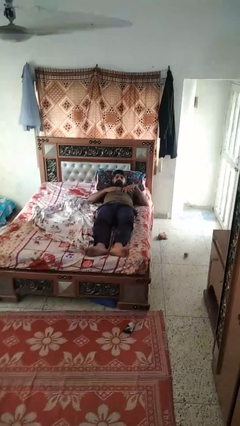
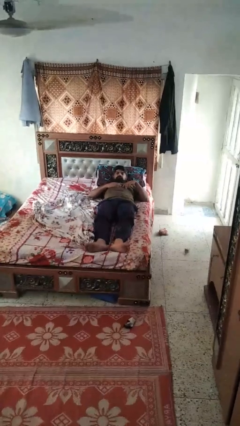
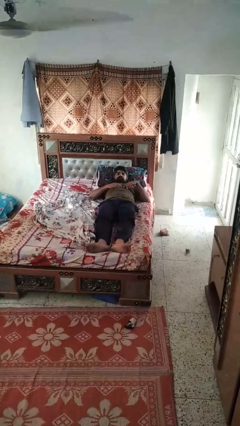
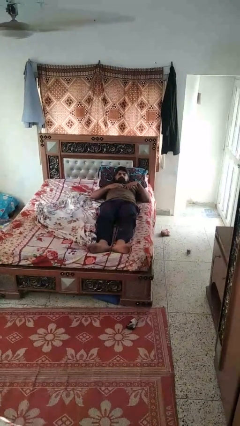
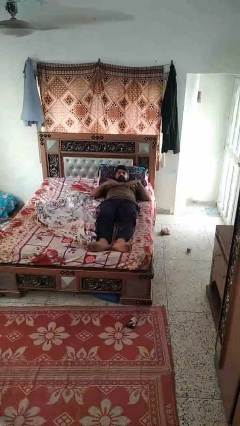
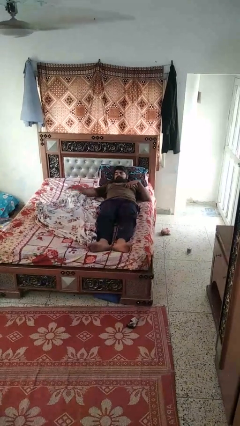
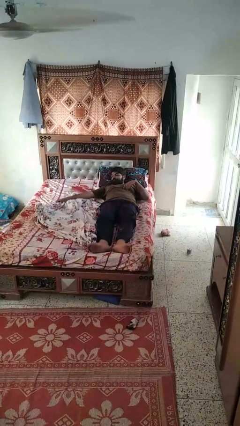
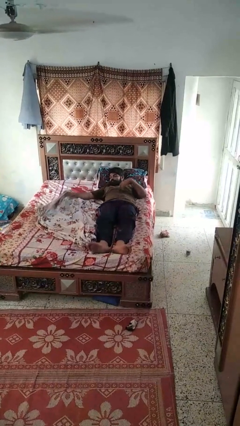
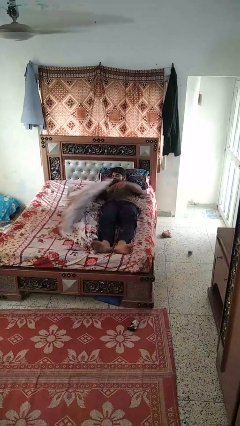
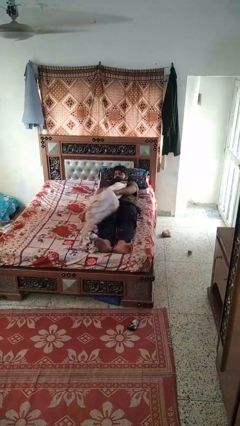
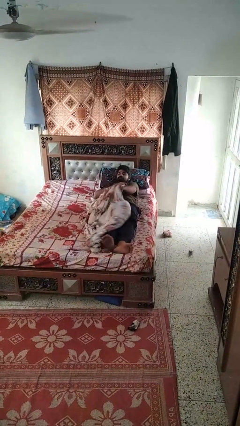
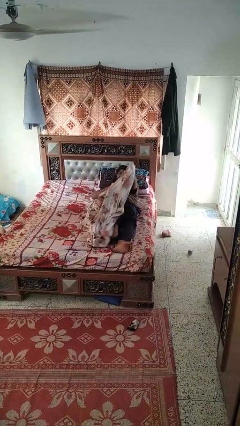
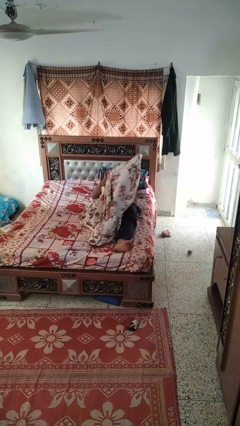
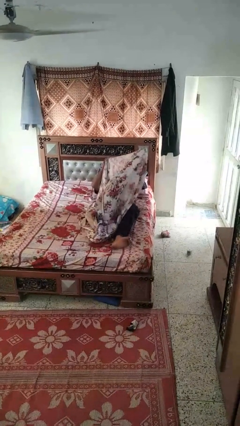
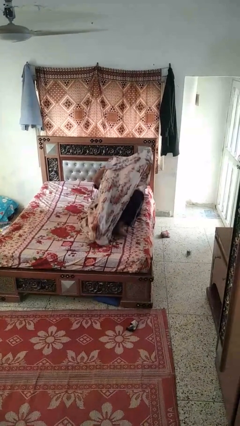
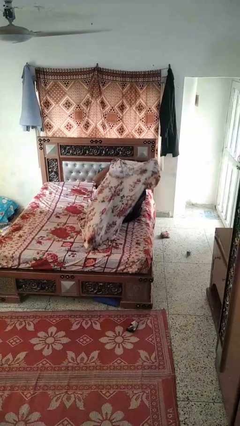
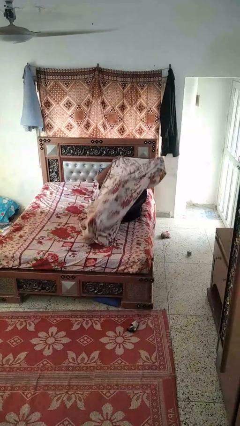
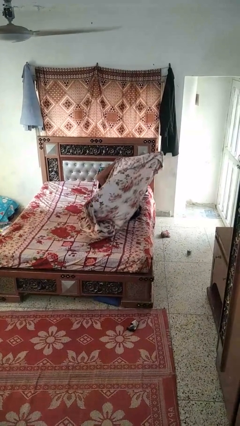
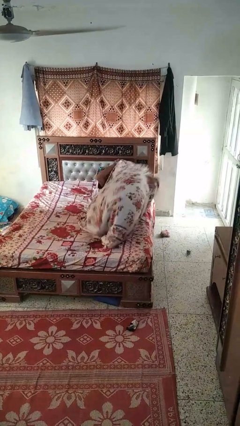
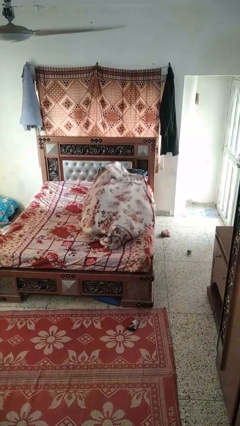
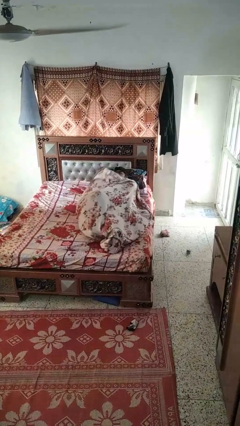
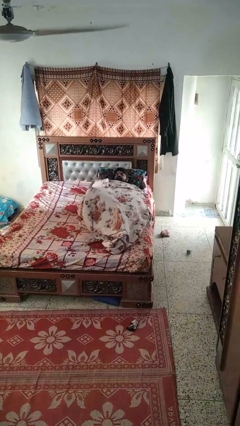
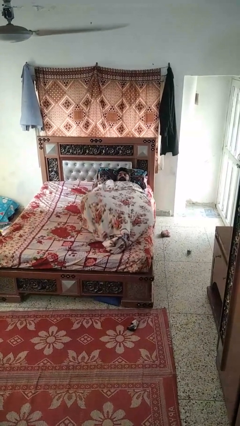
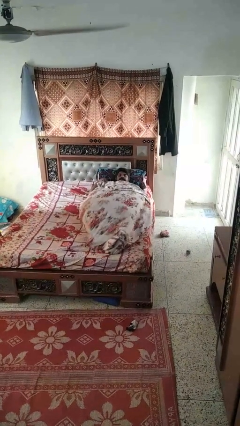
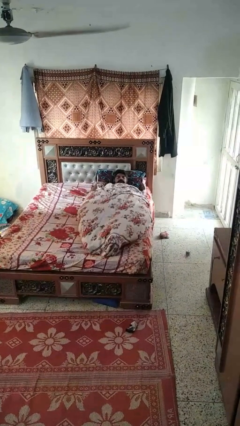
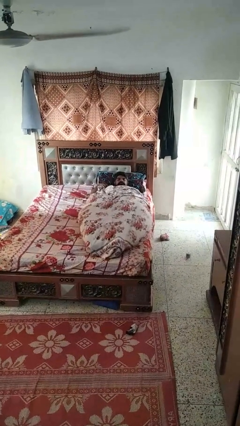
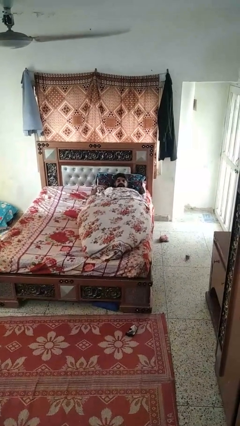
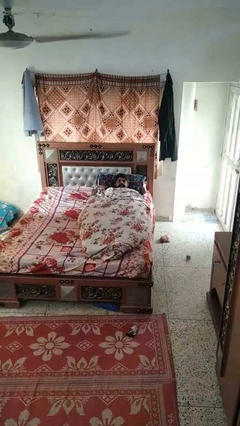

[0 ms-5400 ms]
person covers with bedsheets

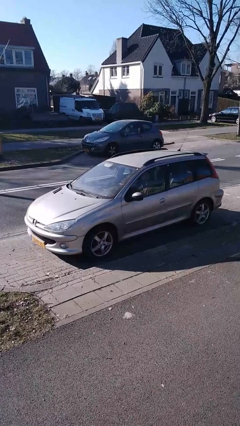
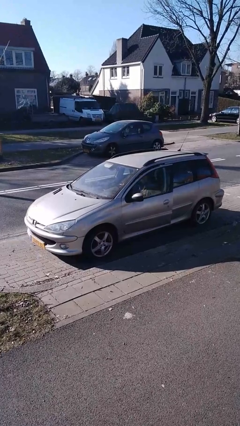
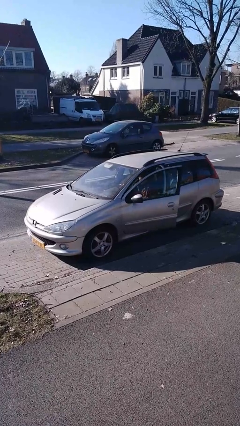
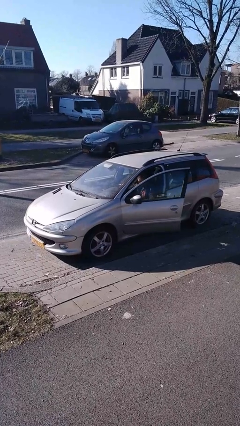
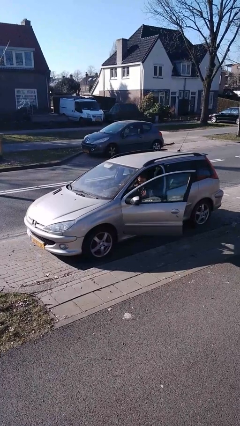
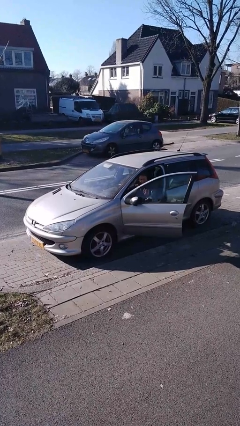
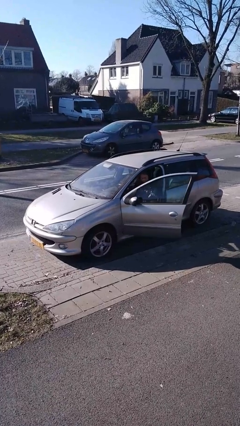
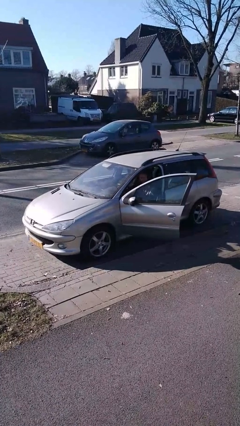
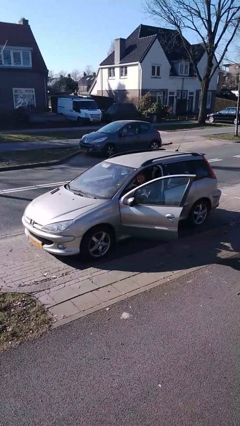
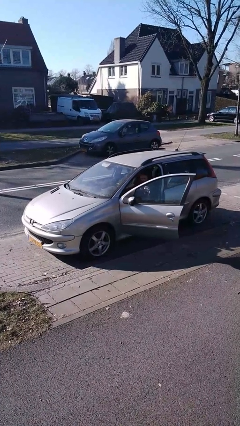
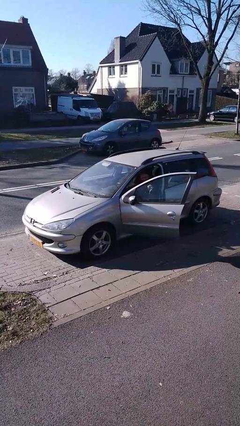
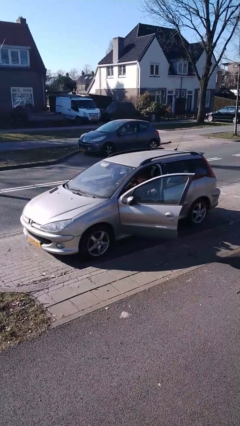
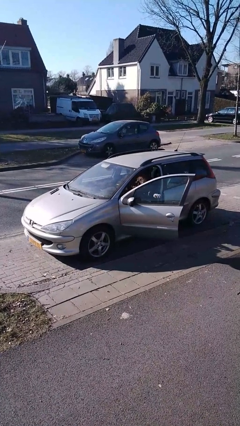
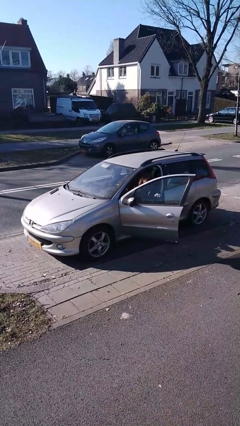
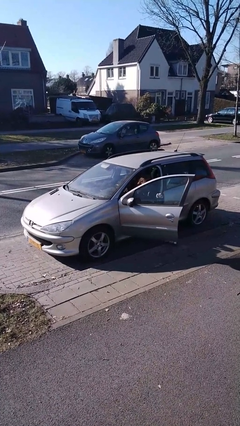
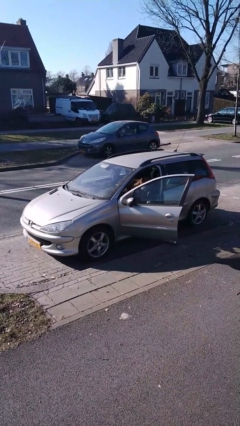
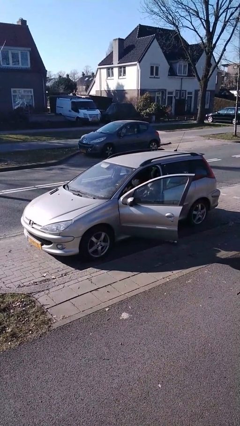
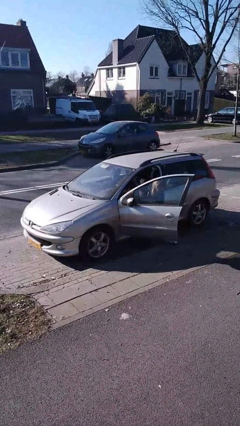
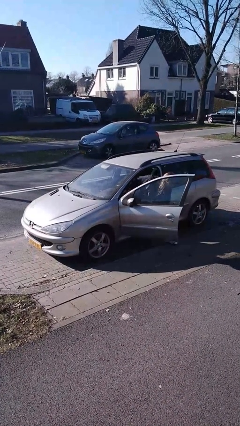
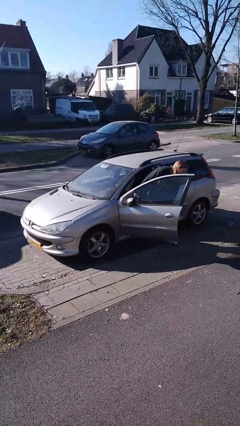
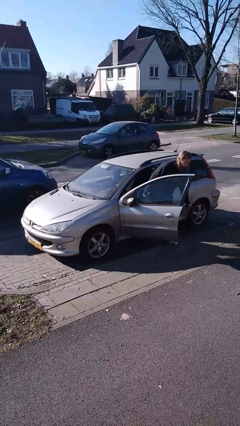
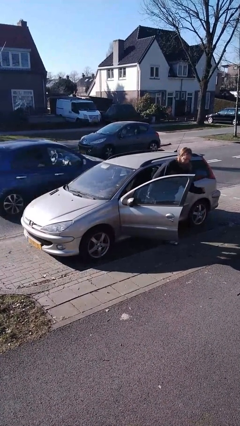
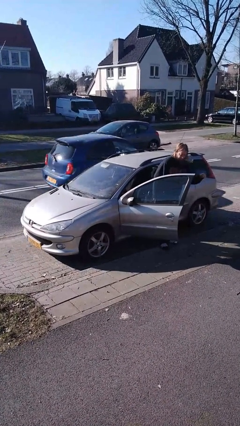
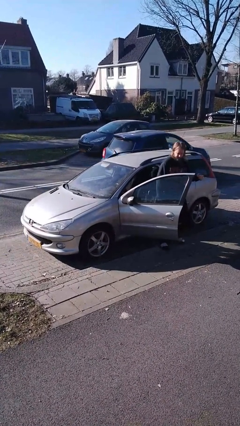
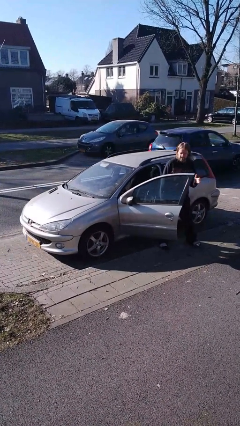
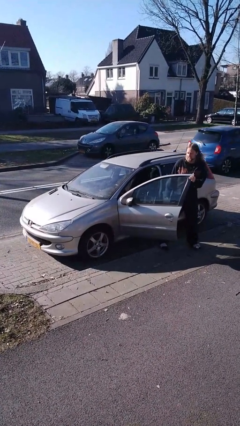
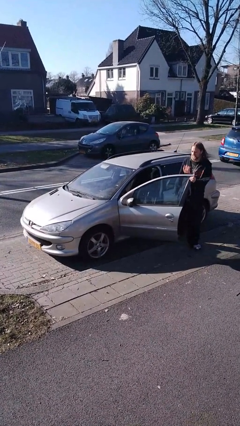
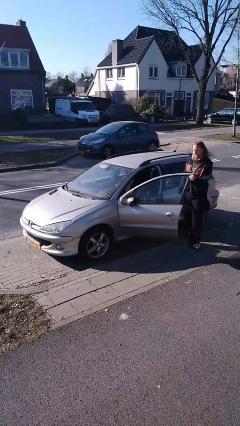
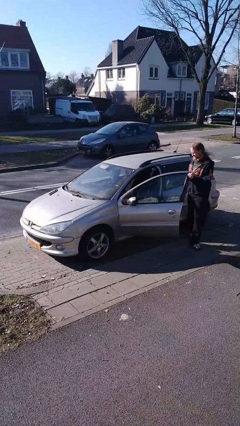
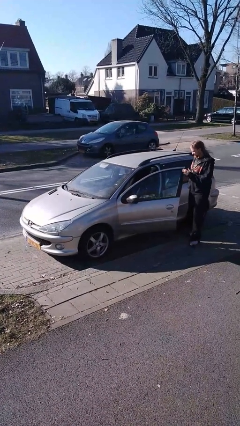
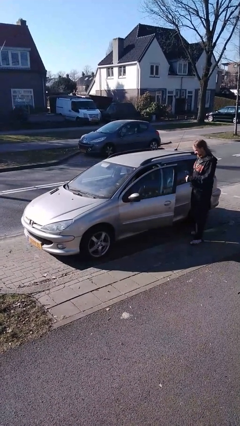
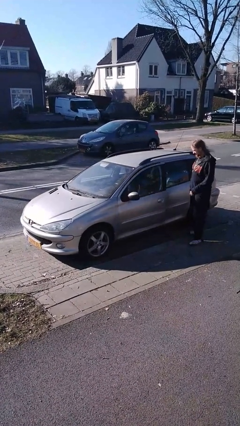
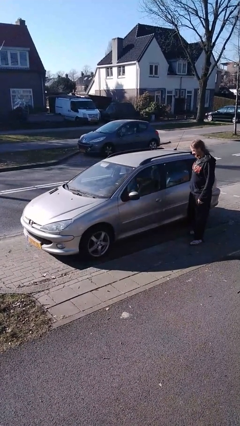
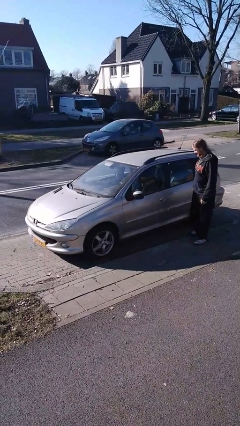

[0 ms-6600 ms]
car drops off person

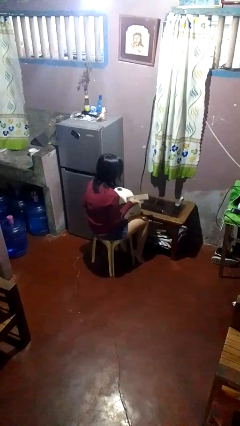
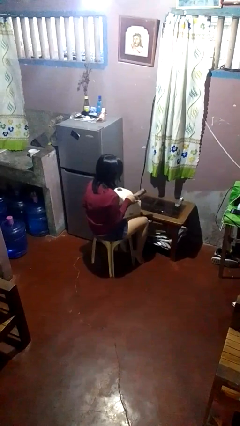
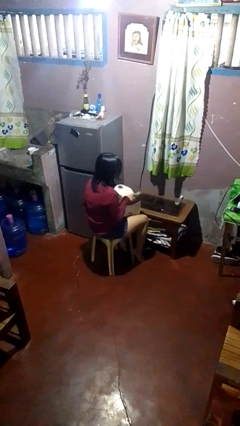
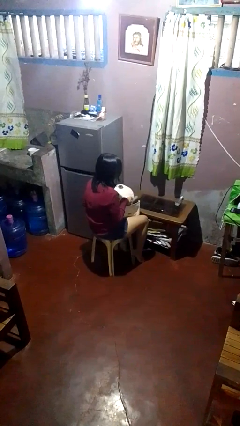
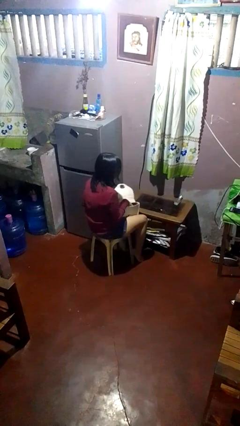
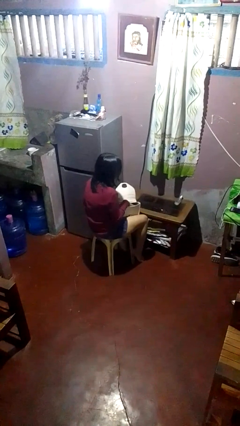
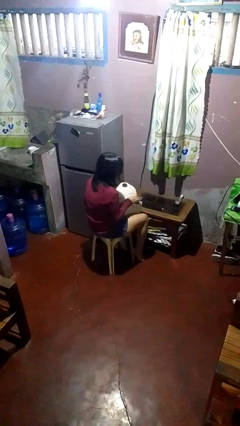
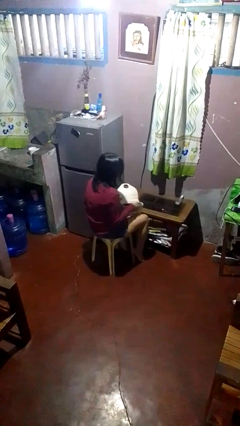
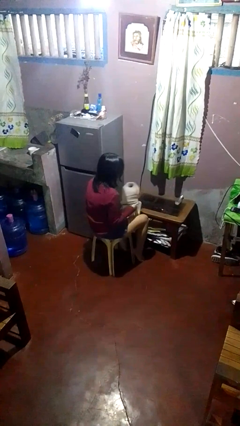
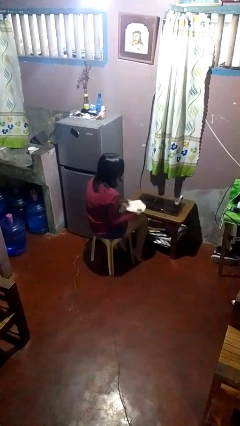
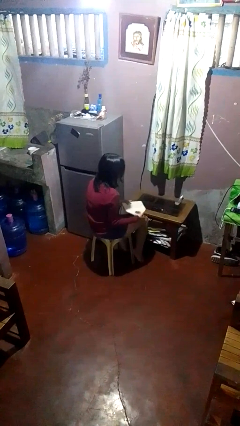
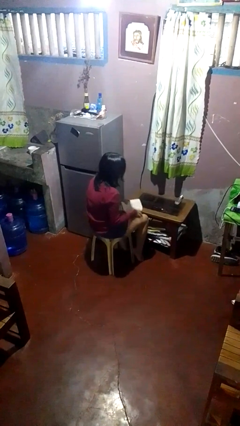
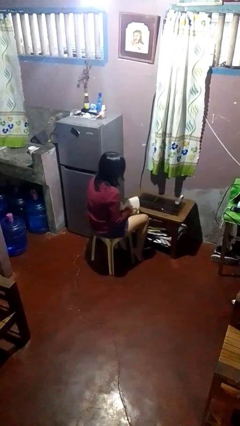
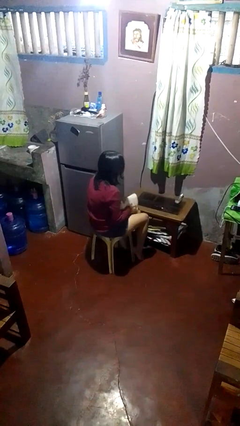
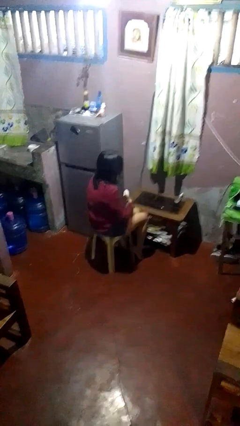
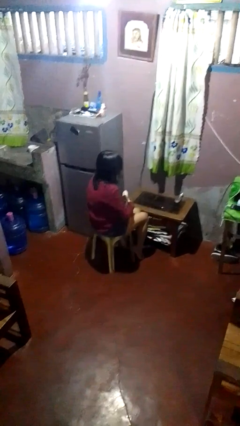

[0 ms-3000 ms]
person puts object into purse

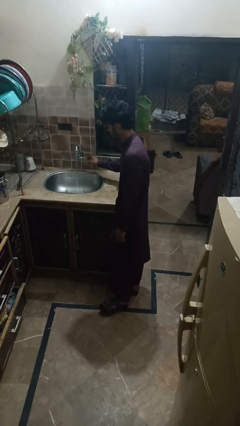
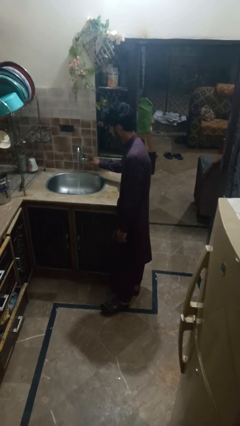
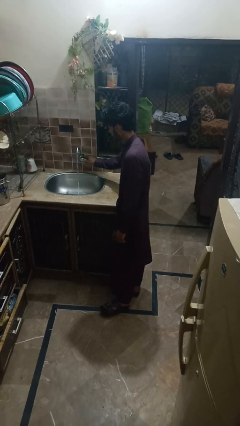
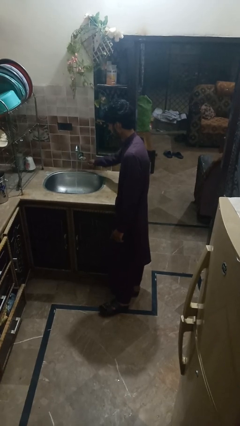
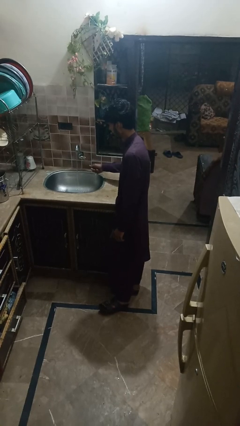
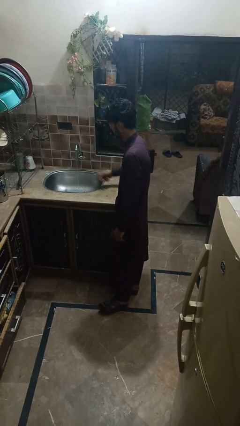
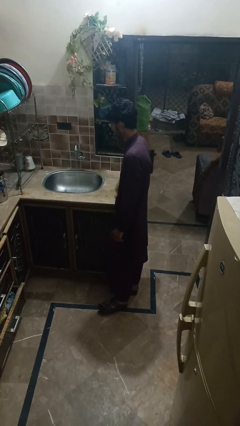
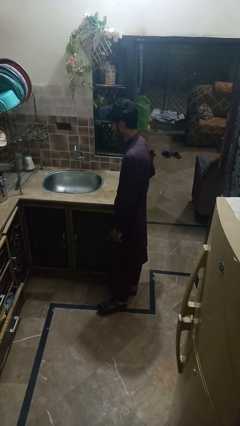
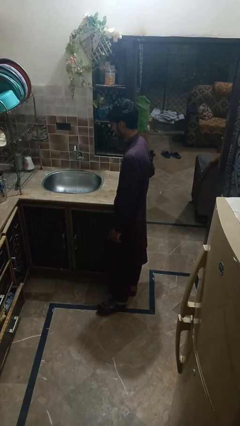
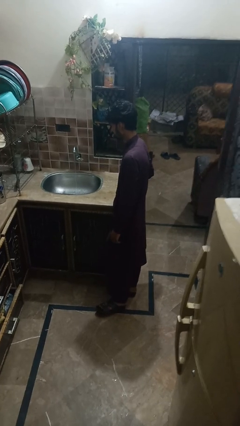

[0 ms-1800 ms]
person closes dishwasher

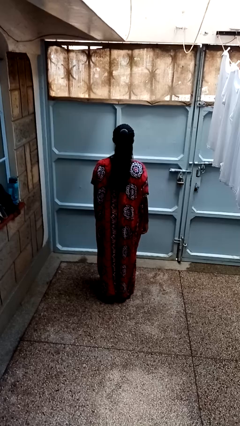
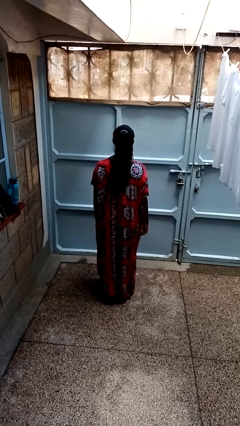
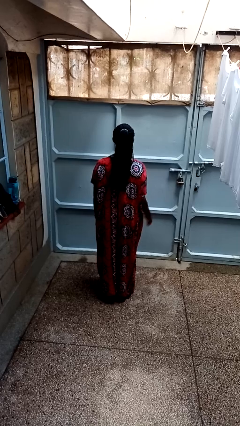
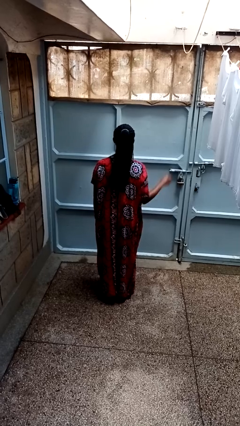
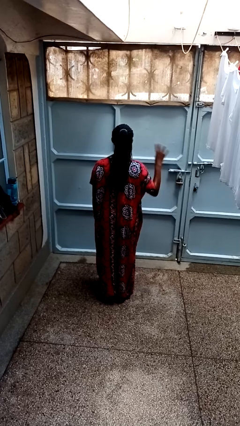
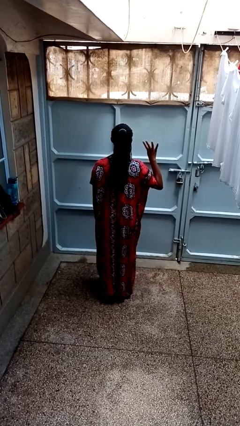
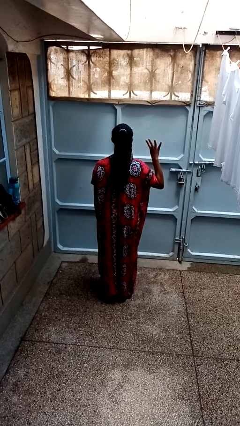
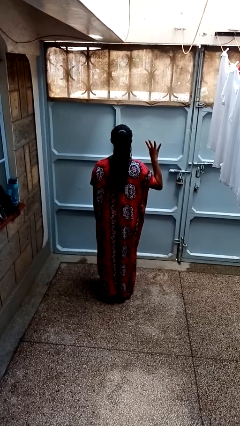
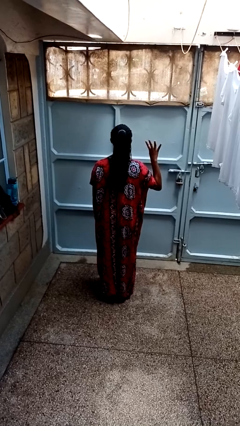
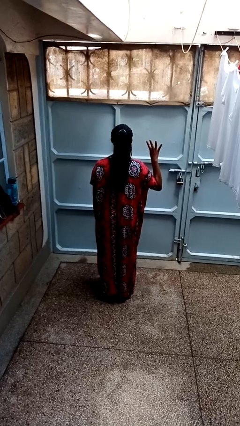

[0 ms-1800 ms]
person gestures number four
